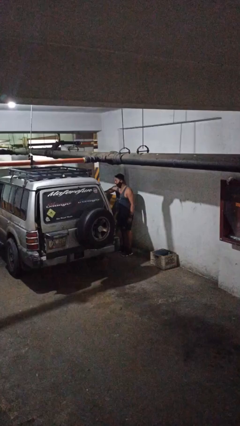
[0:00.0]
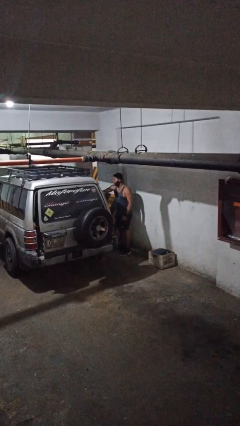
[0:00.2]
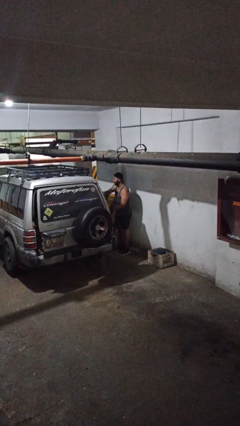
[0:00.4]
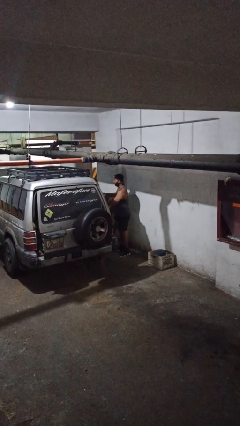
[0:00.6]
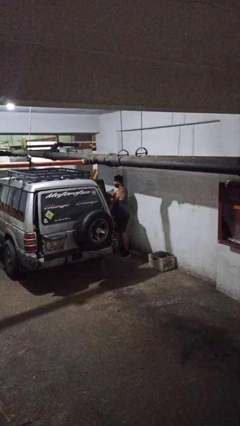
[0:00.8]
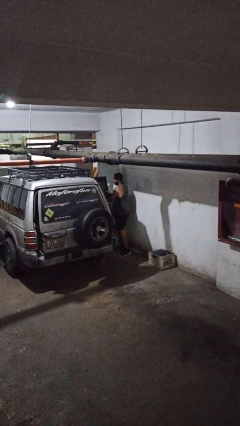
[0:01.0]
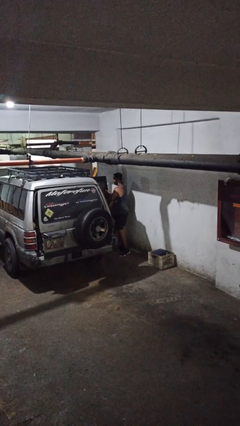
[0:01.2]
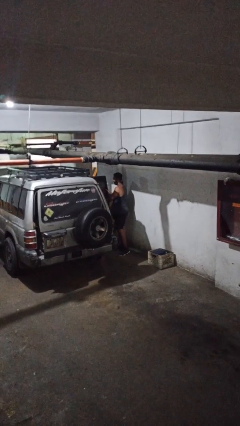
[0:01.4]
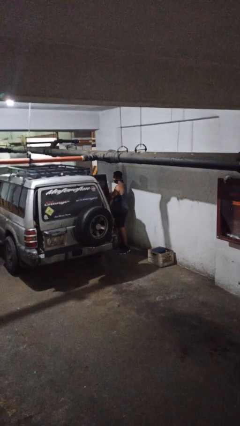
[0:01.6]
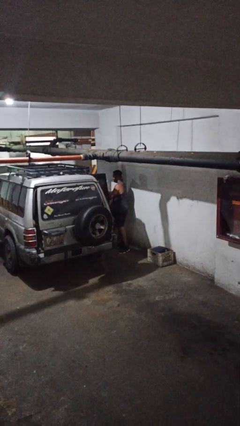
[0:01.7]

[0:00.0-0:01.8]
person opens car door

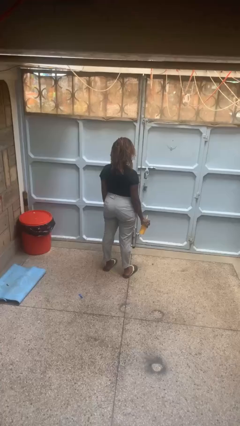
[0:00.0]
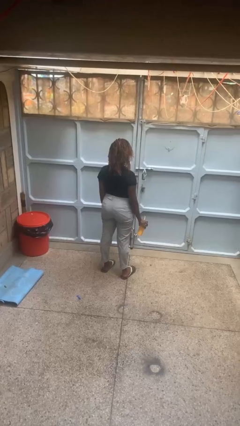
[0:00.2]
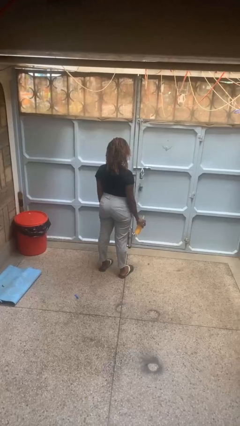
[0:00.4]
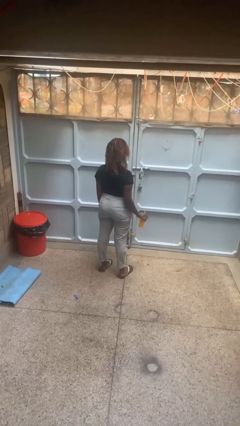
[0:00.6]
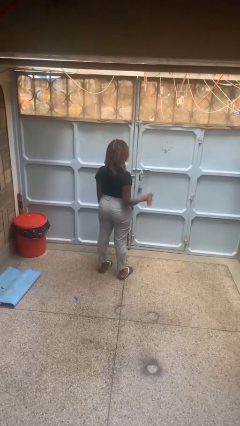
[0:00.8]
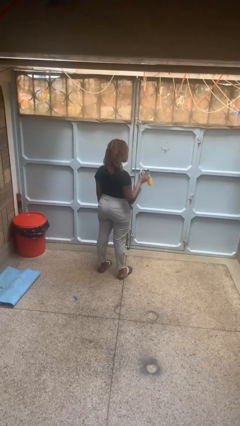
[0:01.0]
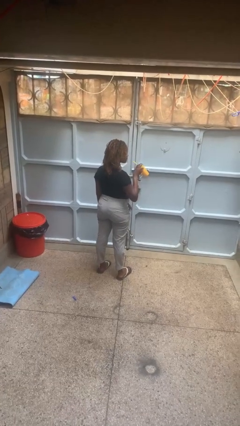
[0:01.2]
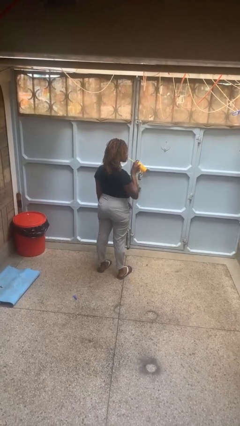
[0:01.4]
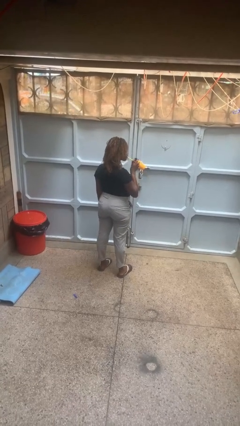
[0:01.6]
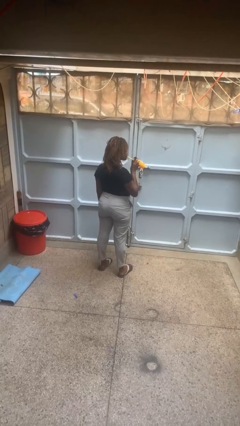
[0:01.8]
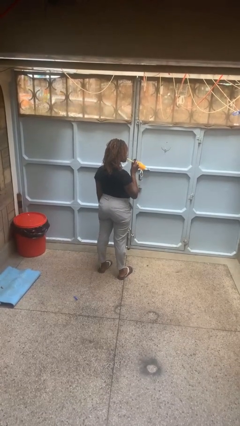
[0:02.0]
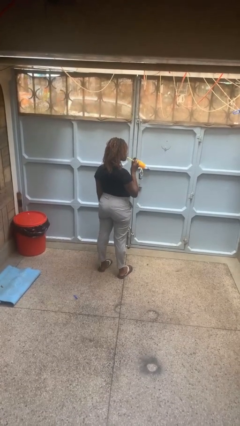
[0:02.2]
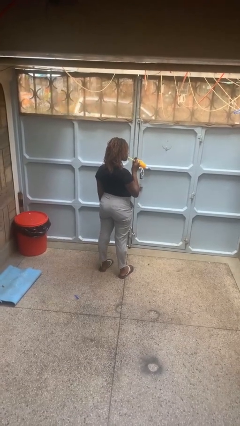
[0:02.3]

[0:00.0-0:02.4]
person drinks from straw

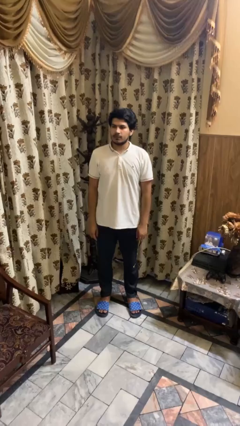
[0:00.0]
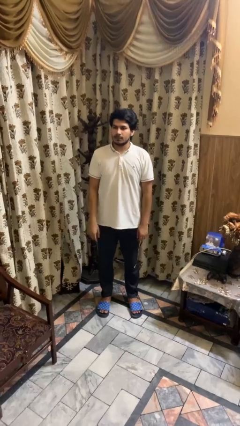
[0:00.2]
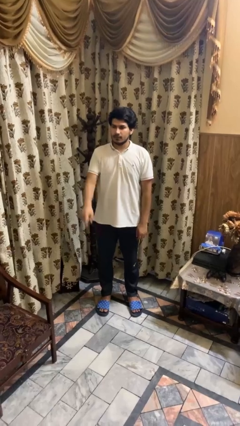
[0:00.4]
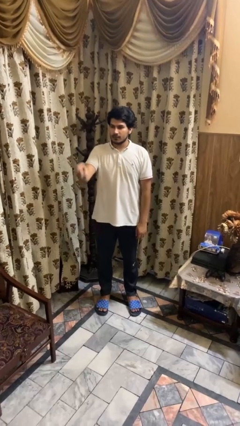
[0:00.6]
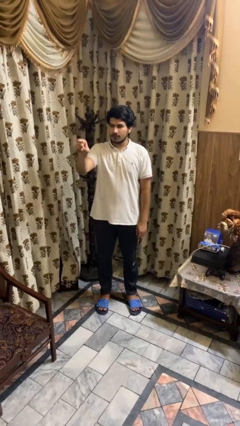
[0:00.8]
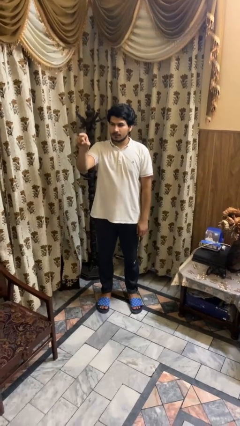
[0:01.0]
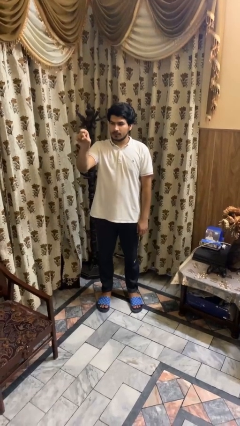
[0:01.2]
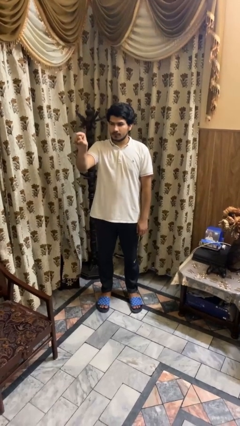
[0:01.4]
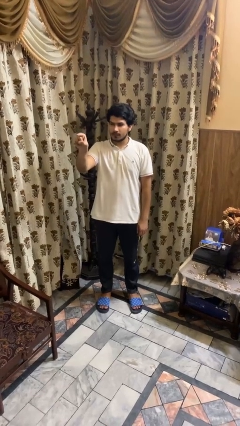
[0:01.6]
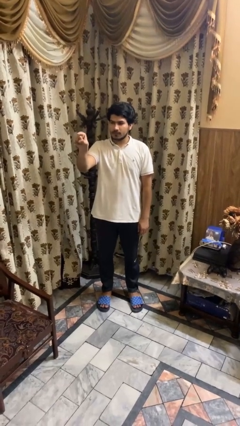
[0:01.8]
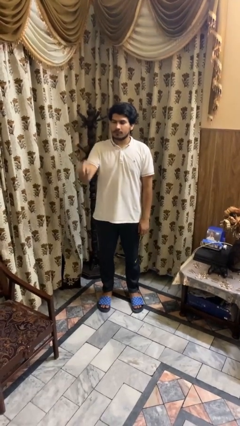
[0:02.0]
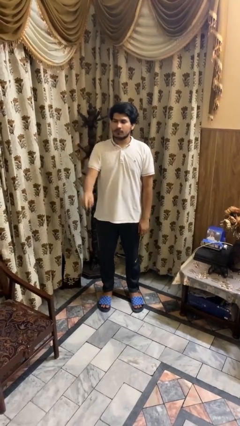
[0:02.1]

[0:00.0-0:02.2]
person points at person

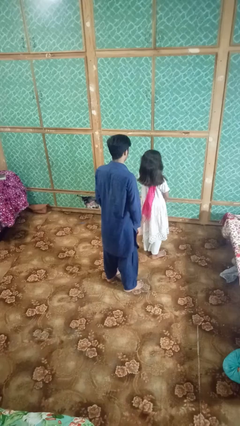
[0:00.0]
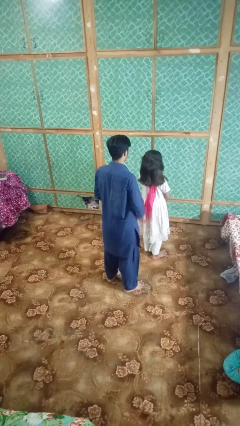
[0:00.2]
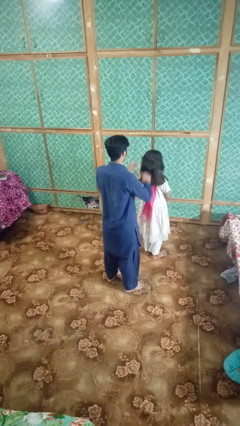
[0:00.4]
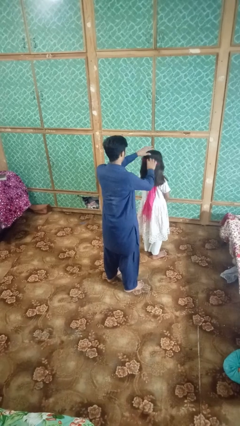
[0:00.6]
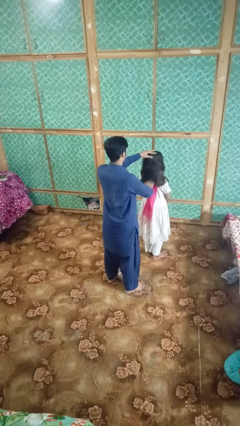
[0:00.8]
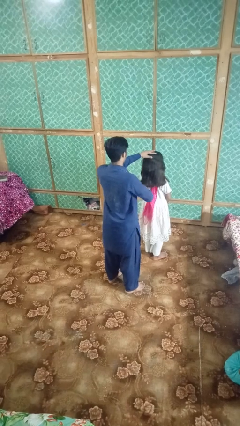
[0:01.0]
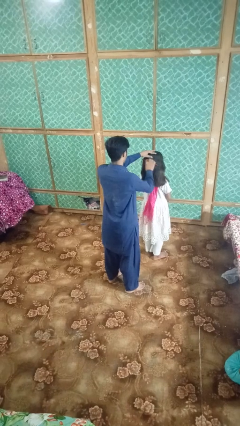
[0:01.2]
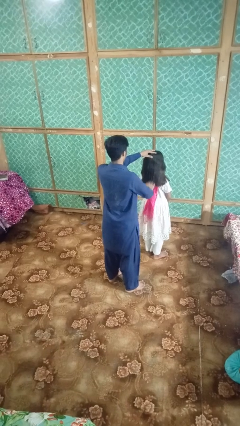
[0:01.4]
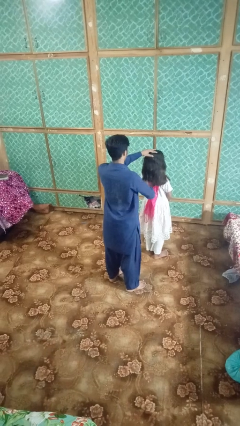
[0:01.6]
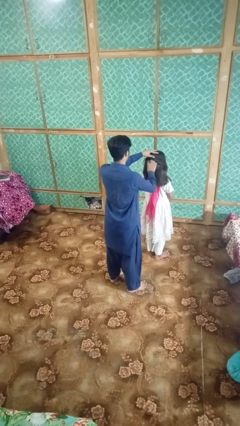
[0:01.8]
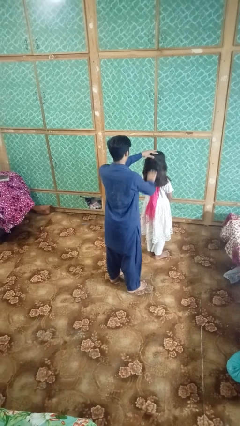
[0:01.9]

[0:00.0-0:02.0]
person brushes hair of person

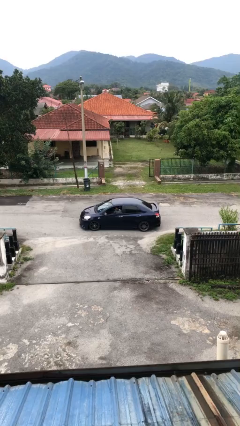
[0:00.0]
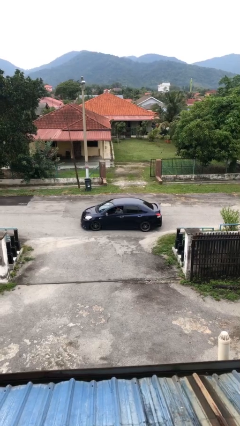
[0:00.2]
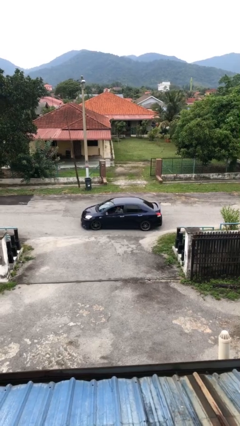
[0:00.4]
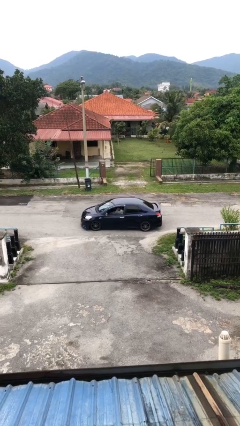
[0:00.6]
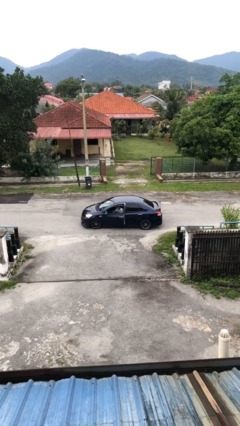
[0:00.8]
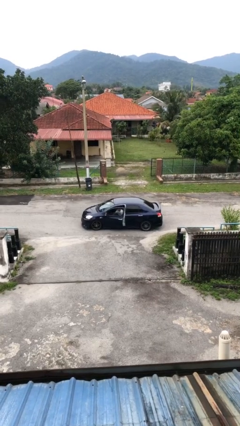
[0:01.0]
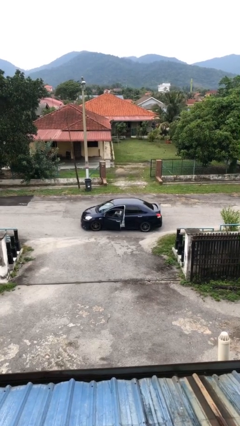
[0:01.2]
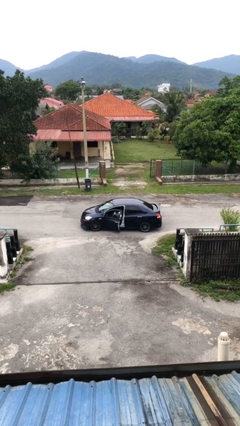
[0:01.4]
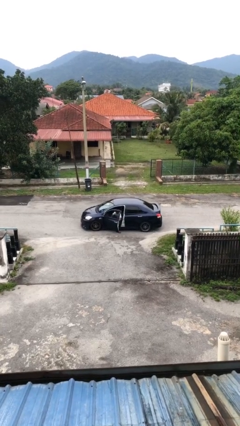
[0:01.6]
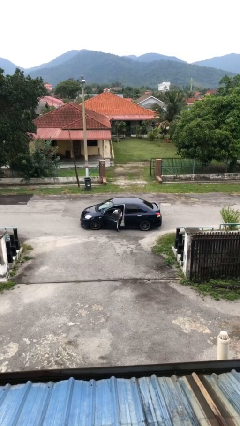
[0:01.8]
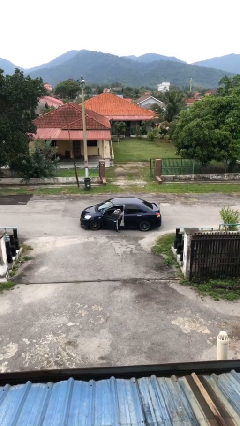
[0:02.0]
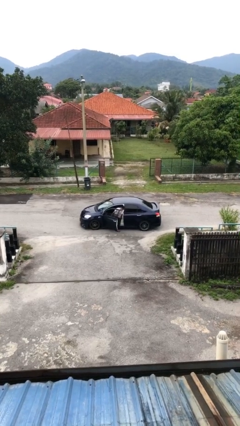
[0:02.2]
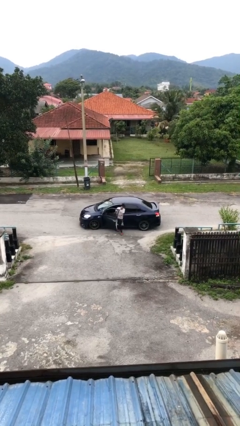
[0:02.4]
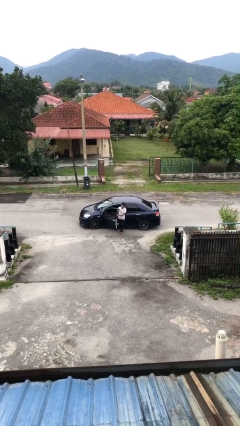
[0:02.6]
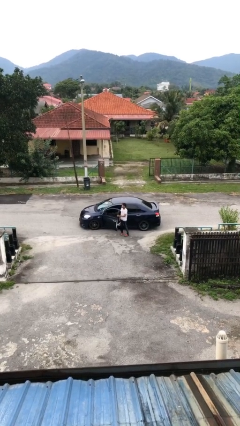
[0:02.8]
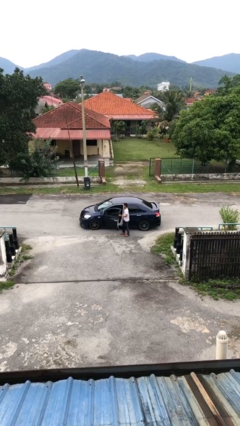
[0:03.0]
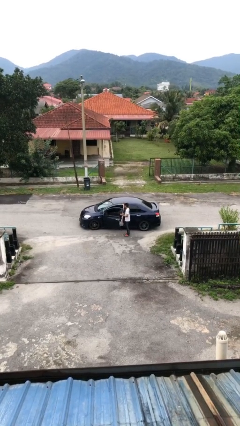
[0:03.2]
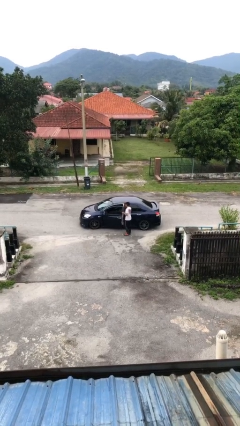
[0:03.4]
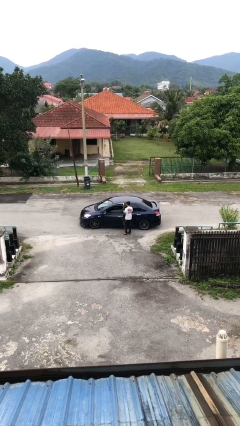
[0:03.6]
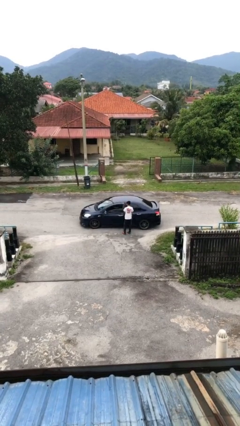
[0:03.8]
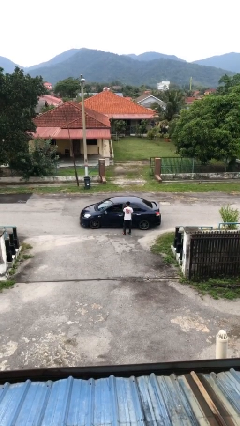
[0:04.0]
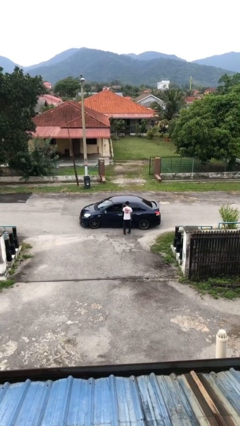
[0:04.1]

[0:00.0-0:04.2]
car drops off person

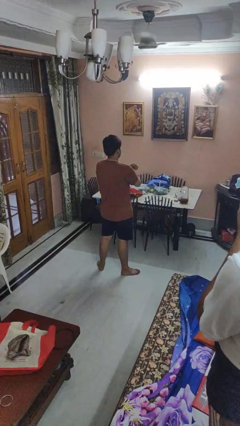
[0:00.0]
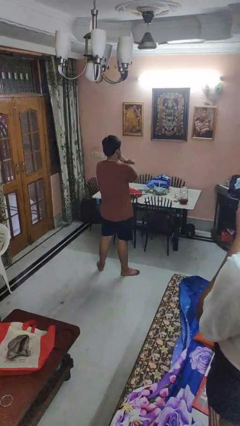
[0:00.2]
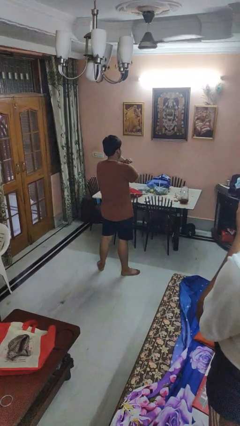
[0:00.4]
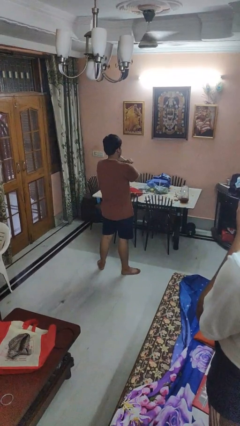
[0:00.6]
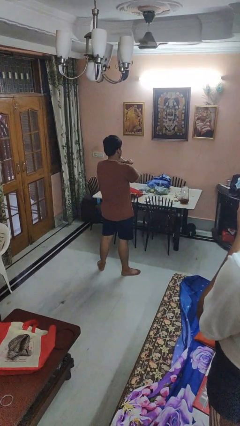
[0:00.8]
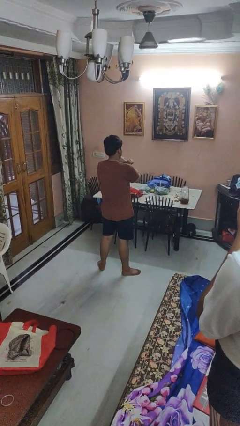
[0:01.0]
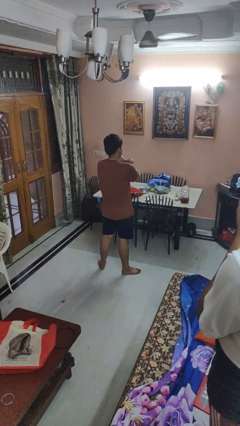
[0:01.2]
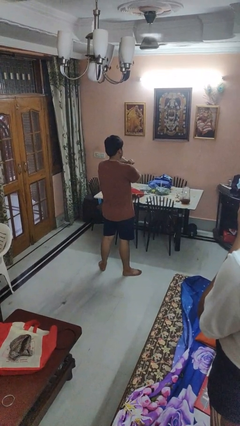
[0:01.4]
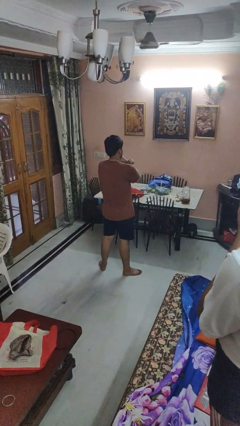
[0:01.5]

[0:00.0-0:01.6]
person gestures arms x

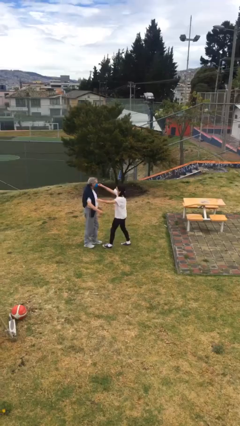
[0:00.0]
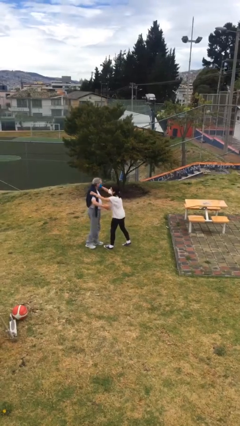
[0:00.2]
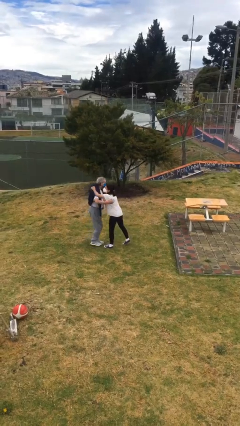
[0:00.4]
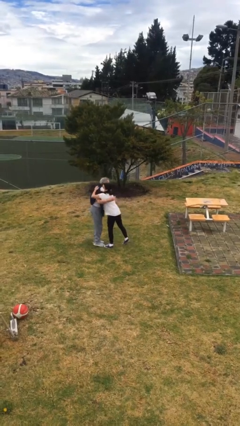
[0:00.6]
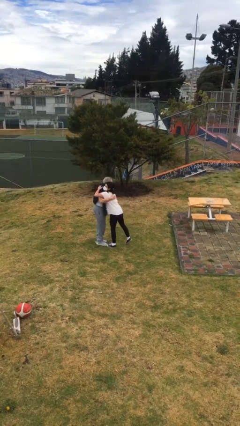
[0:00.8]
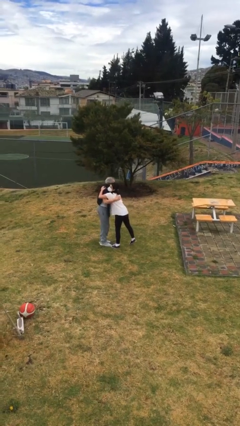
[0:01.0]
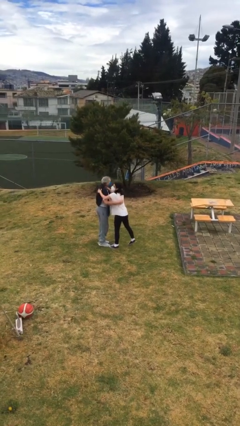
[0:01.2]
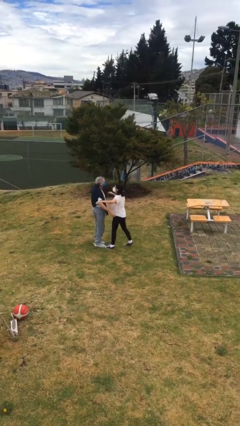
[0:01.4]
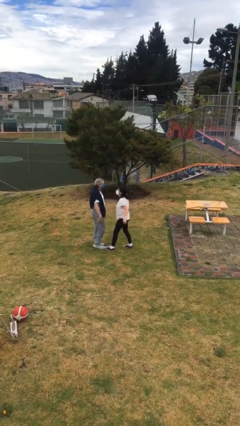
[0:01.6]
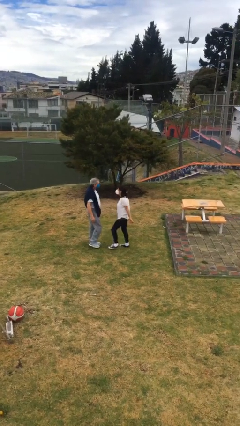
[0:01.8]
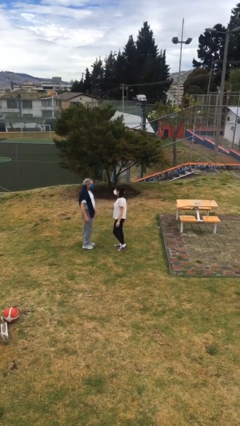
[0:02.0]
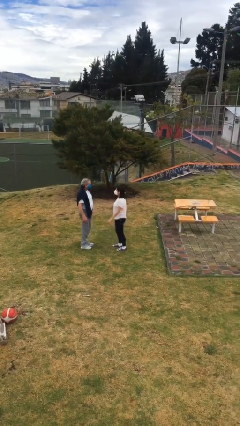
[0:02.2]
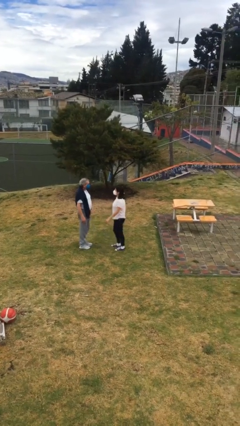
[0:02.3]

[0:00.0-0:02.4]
person embraces person

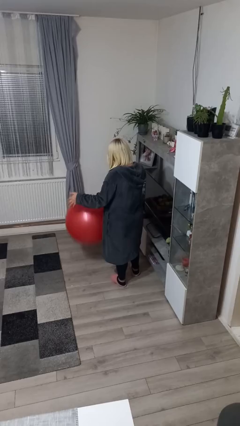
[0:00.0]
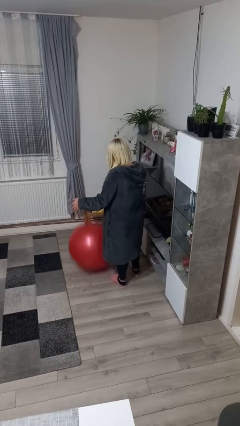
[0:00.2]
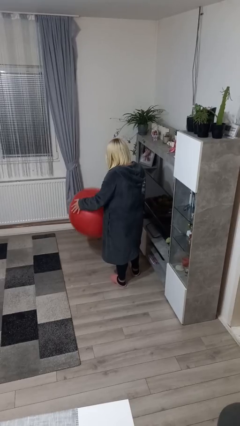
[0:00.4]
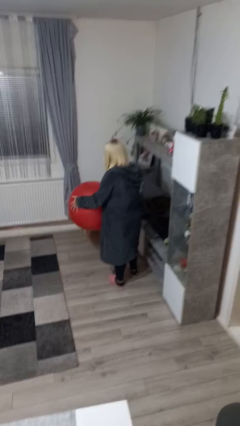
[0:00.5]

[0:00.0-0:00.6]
person bounces ball on floor
